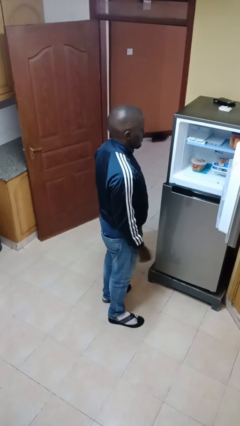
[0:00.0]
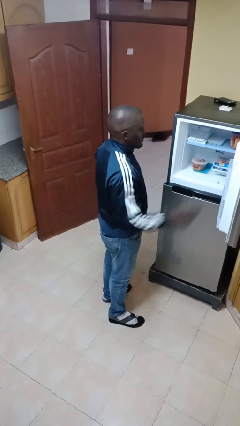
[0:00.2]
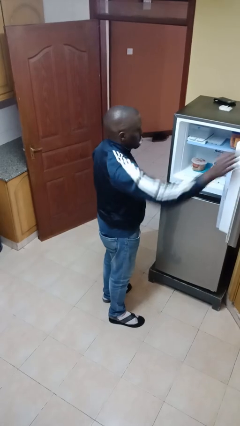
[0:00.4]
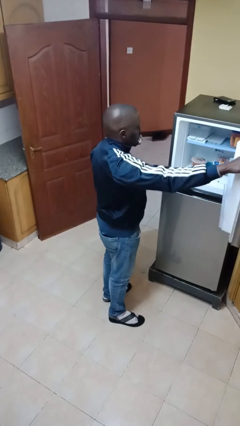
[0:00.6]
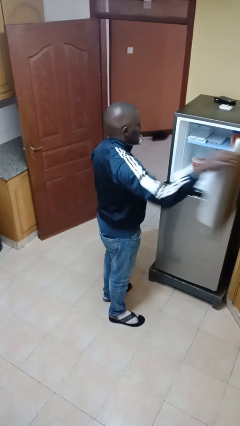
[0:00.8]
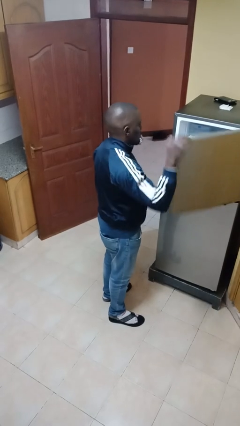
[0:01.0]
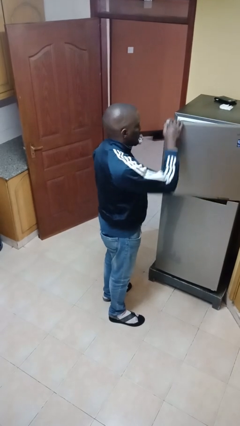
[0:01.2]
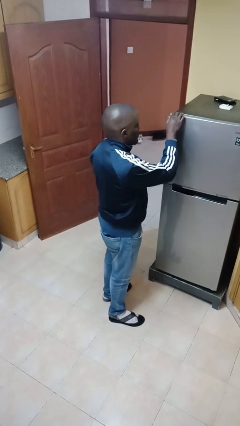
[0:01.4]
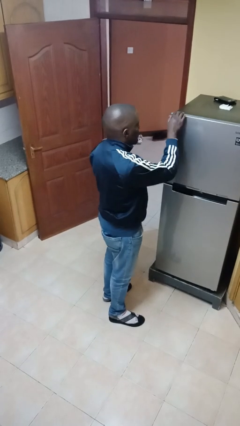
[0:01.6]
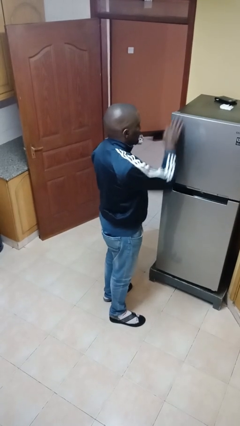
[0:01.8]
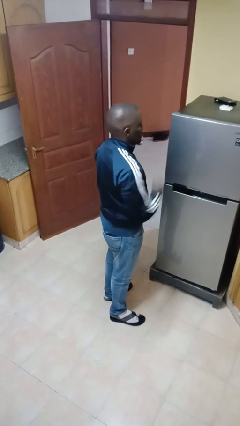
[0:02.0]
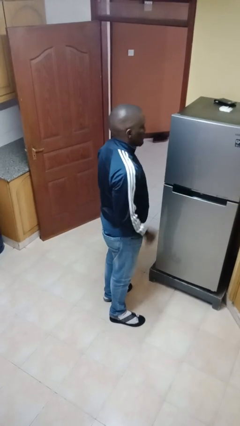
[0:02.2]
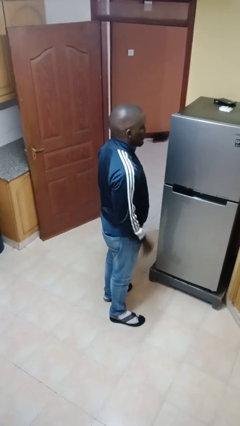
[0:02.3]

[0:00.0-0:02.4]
person closes refrigerator

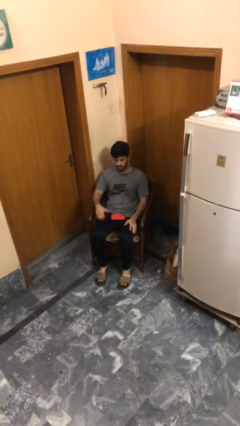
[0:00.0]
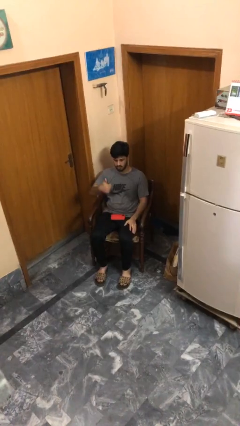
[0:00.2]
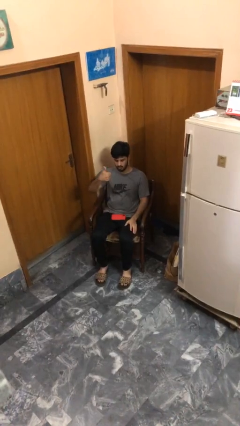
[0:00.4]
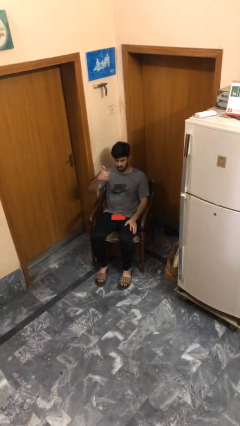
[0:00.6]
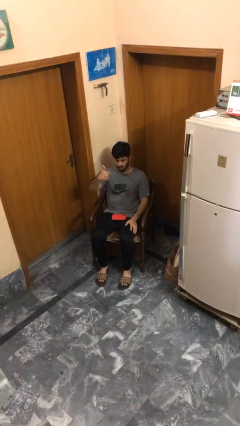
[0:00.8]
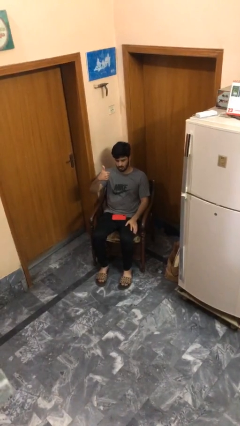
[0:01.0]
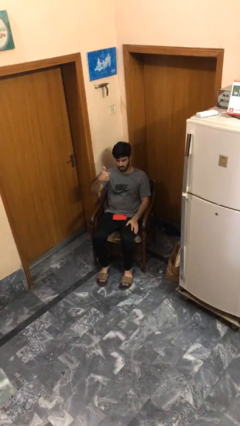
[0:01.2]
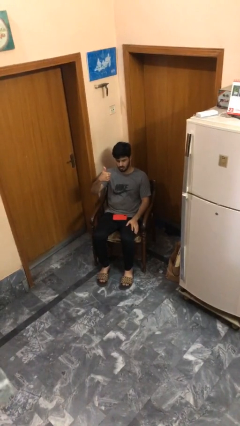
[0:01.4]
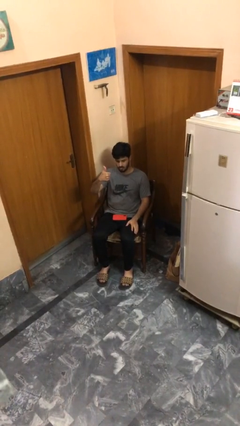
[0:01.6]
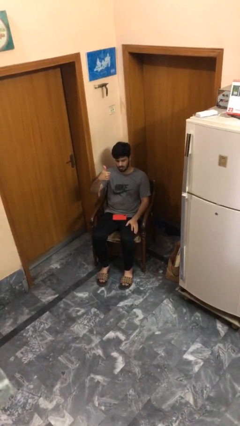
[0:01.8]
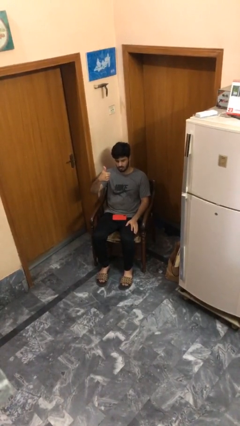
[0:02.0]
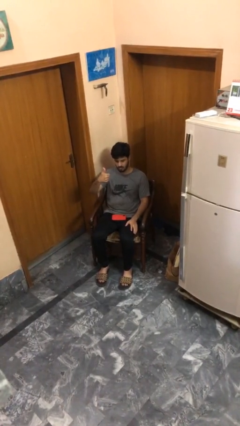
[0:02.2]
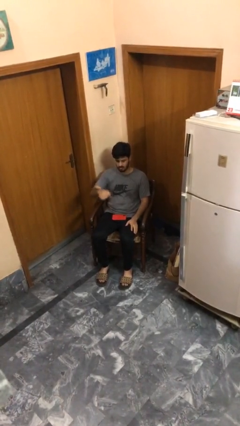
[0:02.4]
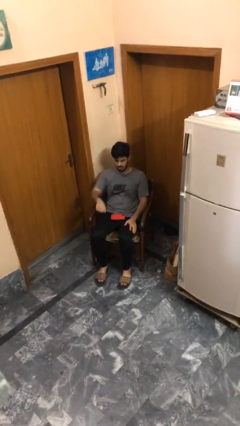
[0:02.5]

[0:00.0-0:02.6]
person gestures thumbs up

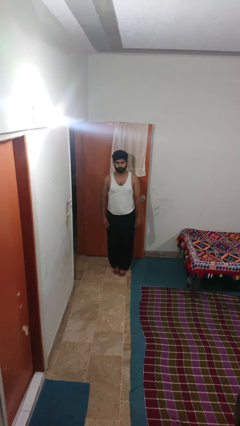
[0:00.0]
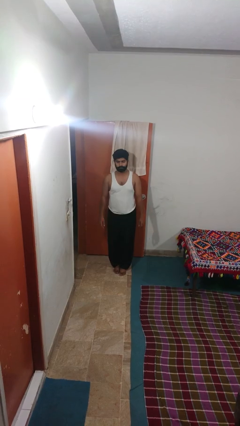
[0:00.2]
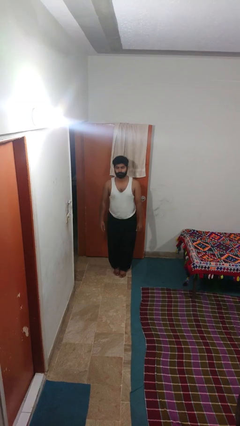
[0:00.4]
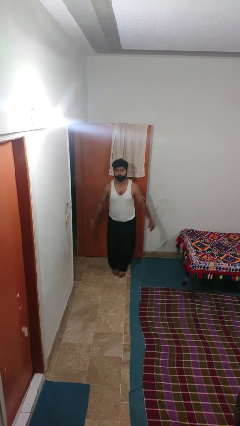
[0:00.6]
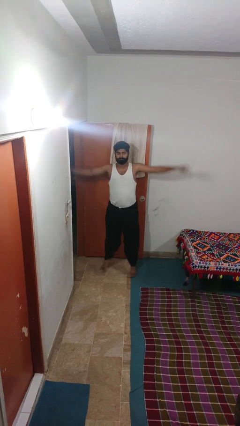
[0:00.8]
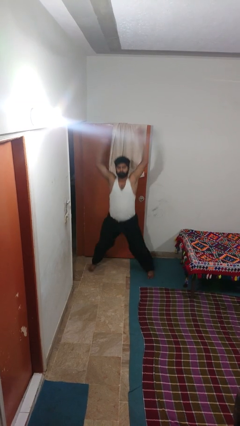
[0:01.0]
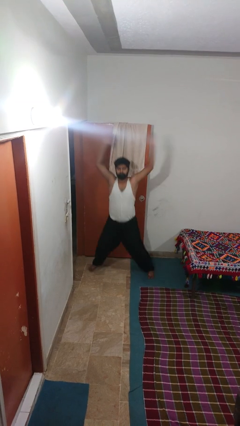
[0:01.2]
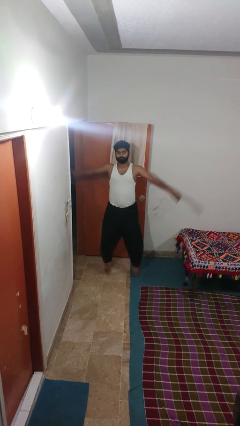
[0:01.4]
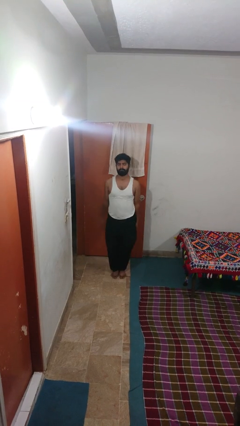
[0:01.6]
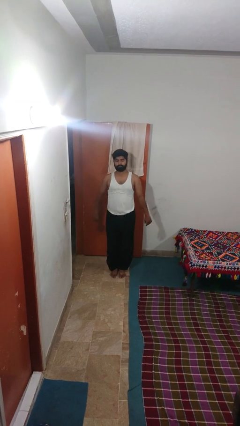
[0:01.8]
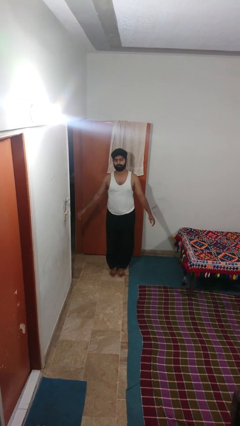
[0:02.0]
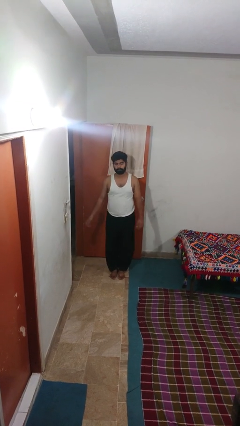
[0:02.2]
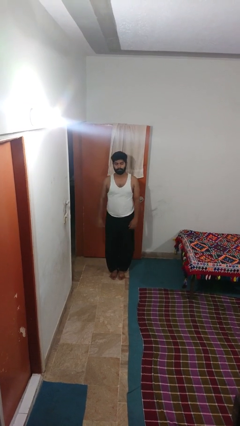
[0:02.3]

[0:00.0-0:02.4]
person exercises with jumping jacks

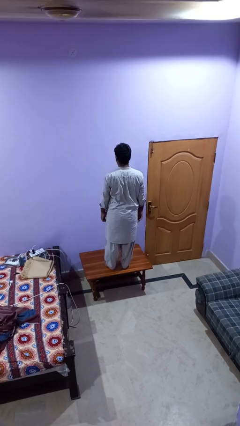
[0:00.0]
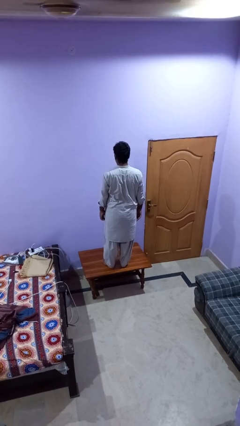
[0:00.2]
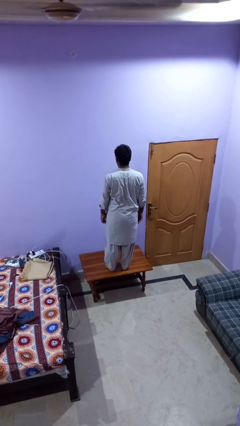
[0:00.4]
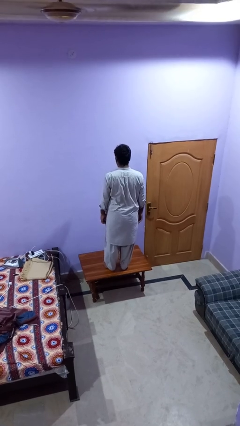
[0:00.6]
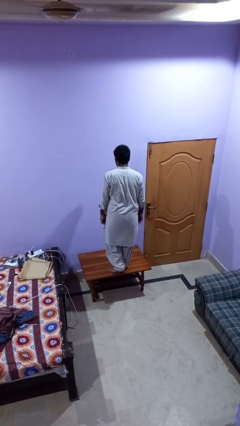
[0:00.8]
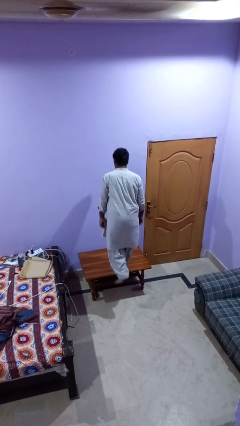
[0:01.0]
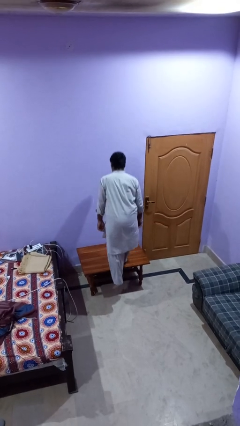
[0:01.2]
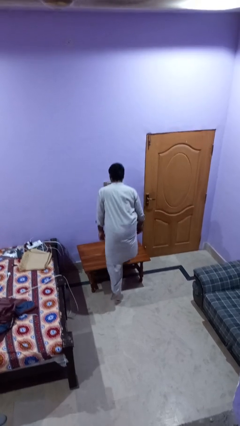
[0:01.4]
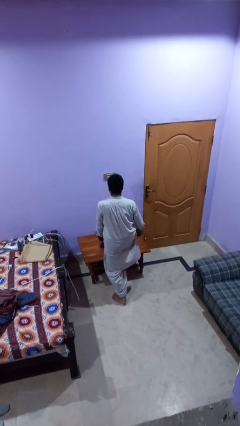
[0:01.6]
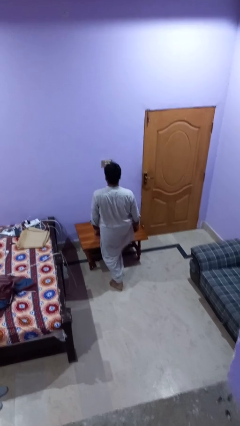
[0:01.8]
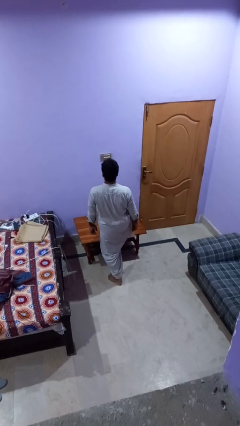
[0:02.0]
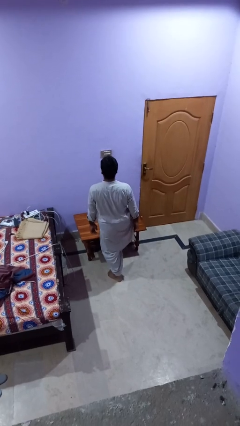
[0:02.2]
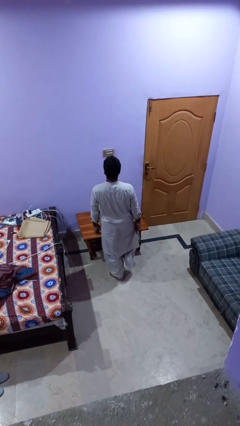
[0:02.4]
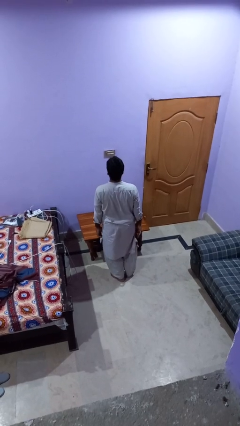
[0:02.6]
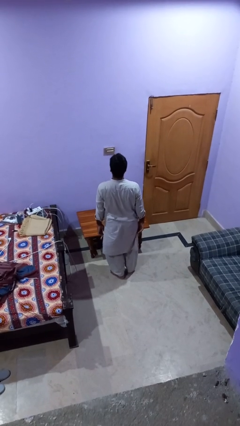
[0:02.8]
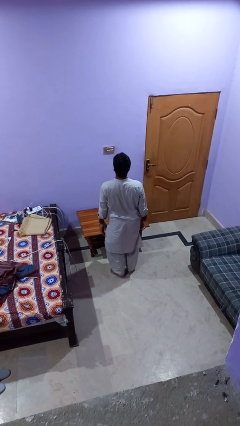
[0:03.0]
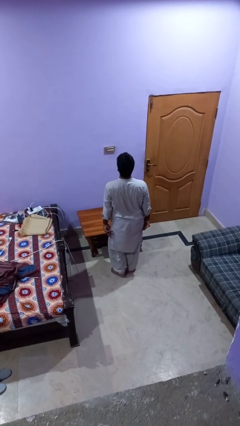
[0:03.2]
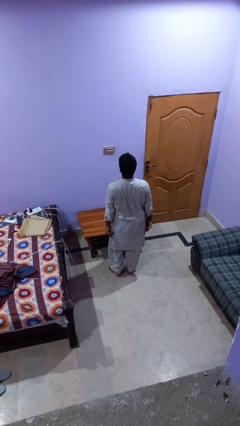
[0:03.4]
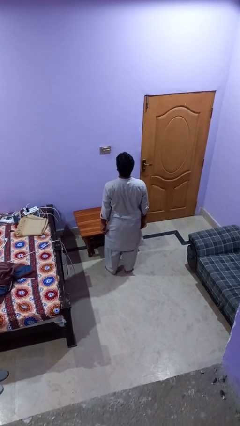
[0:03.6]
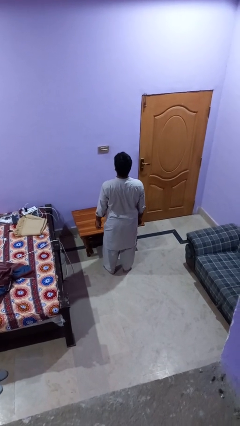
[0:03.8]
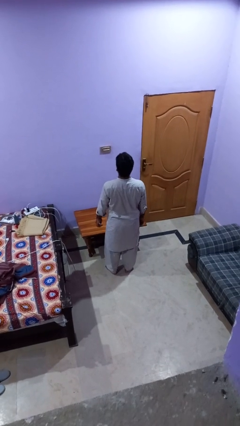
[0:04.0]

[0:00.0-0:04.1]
person climbs off table

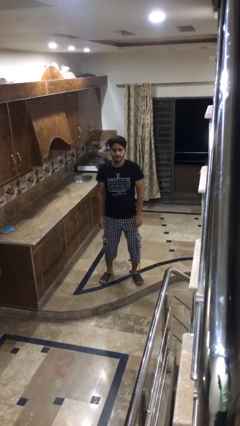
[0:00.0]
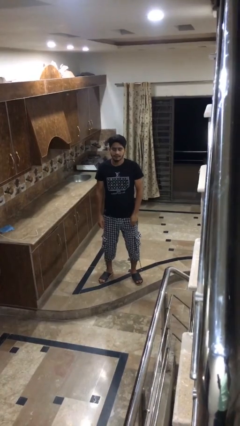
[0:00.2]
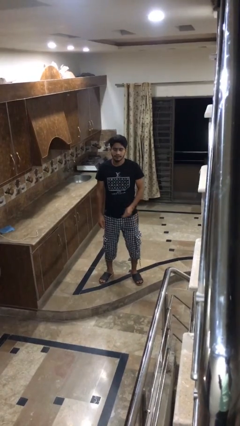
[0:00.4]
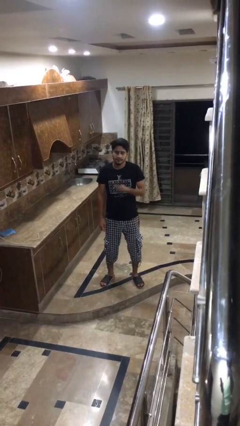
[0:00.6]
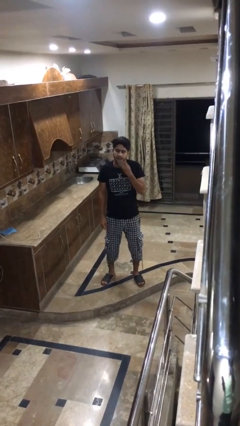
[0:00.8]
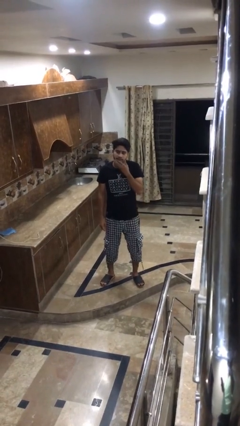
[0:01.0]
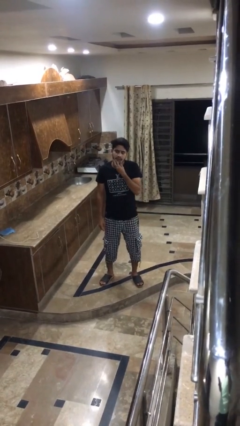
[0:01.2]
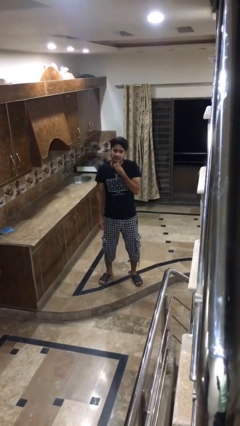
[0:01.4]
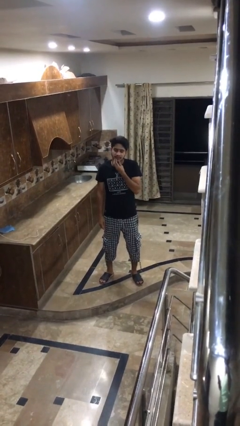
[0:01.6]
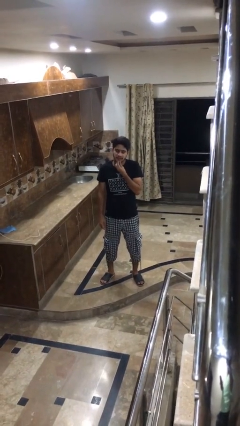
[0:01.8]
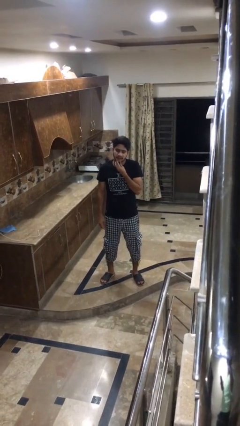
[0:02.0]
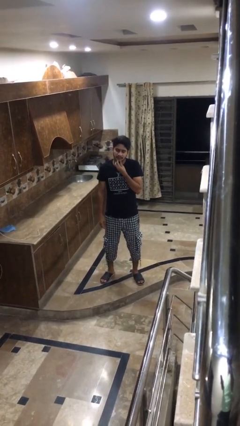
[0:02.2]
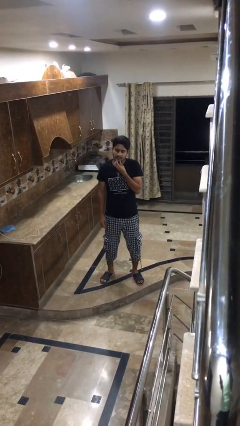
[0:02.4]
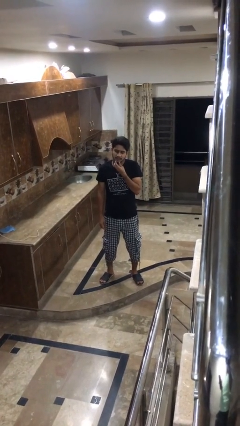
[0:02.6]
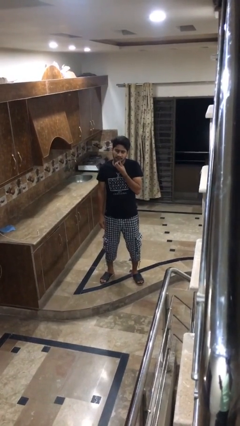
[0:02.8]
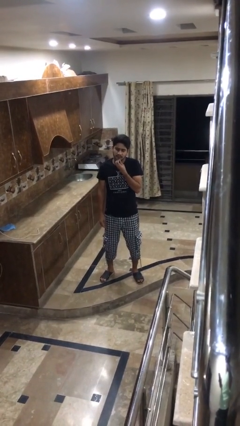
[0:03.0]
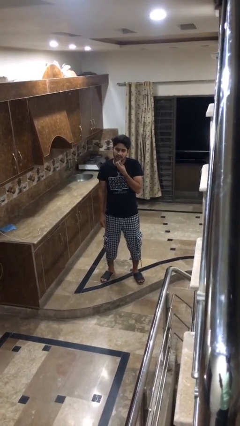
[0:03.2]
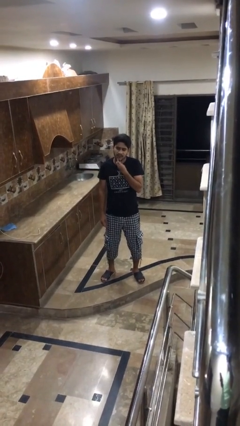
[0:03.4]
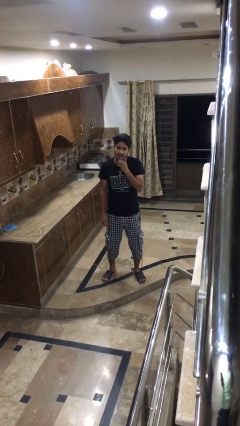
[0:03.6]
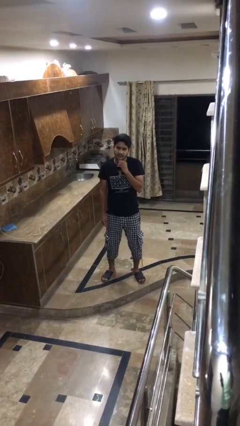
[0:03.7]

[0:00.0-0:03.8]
person strokes chin

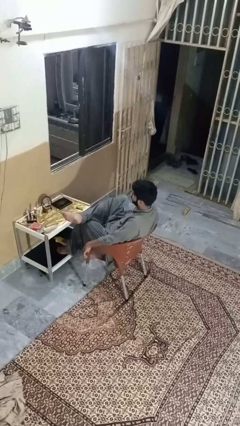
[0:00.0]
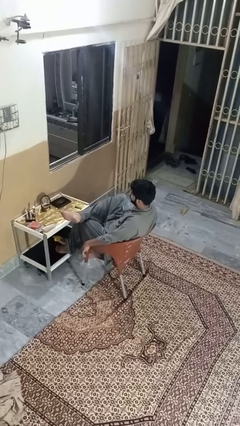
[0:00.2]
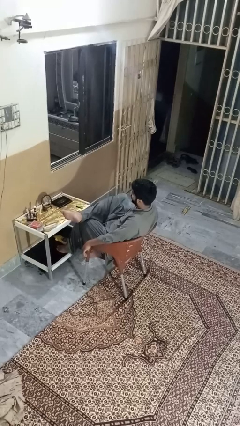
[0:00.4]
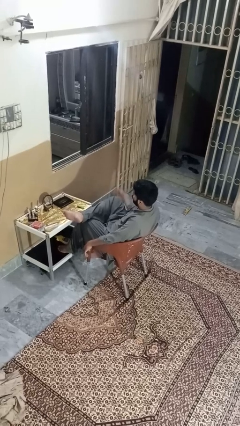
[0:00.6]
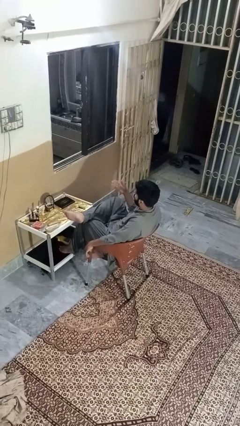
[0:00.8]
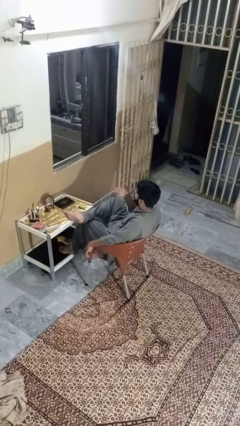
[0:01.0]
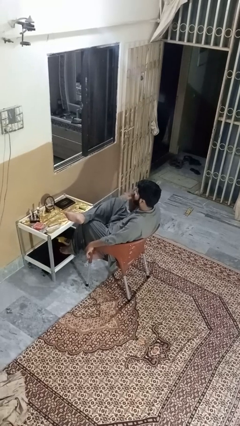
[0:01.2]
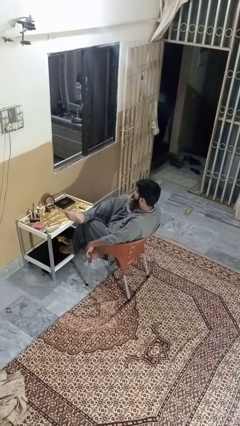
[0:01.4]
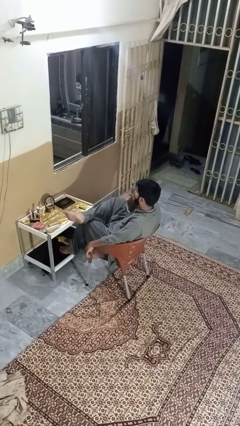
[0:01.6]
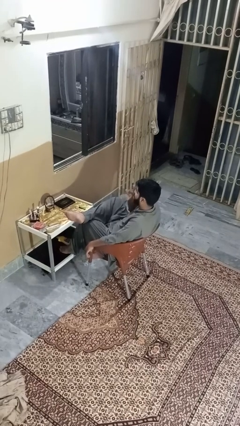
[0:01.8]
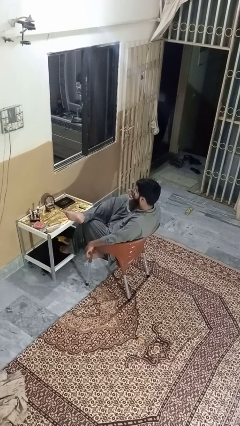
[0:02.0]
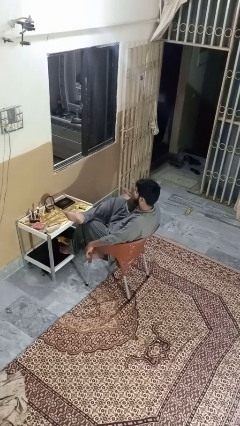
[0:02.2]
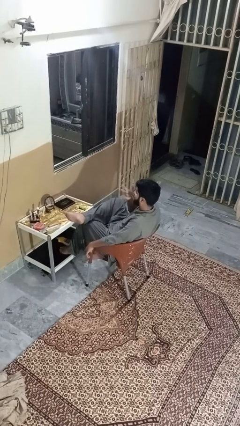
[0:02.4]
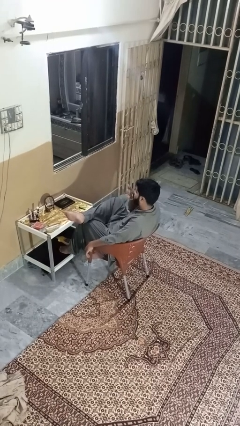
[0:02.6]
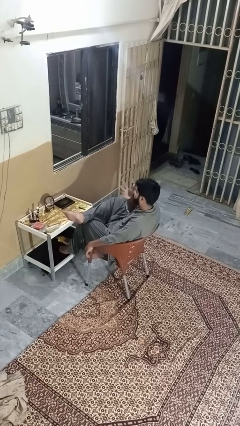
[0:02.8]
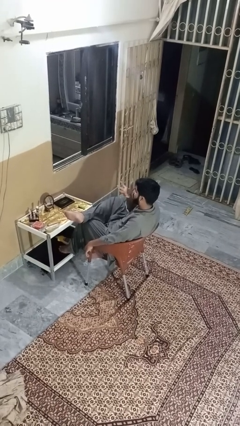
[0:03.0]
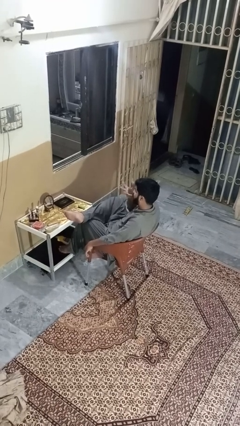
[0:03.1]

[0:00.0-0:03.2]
person licks fingers
